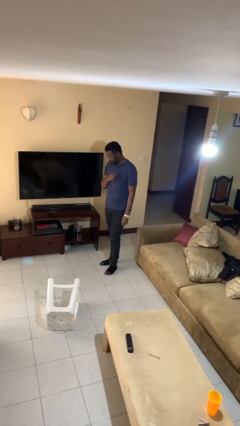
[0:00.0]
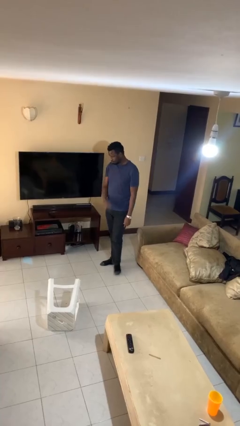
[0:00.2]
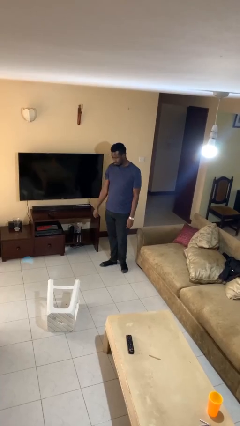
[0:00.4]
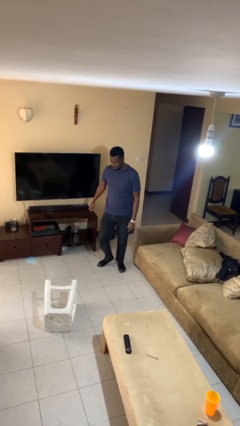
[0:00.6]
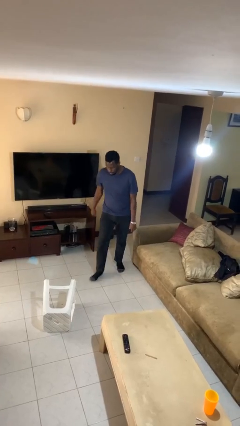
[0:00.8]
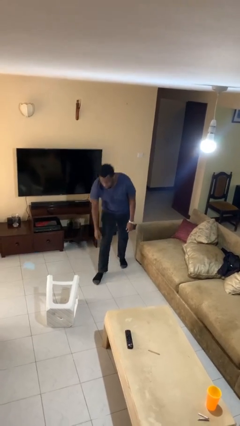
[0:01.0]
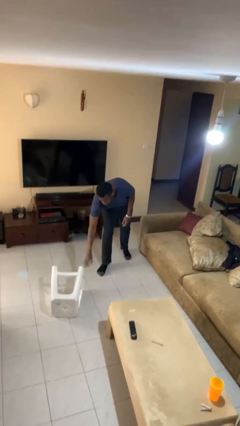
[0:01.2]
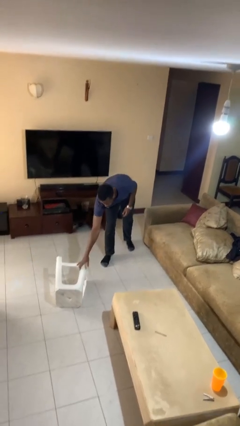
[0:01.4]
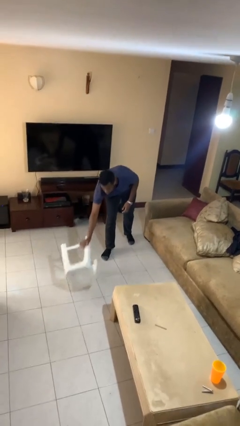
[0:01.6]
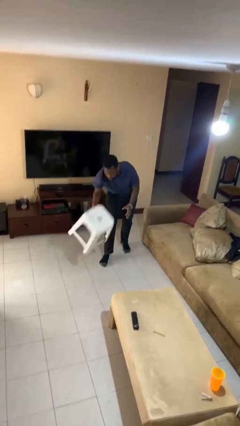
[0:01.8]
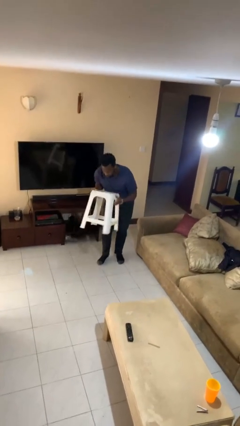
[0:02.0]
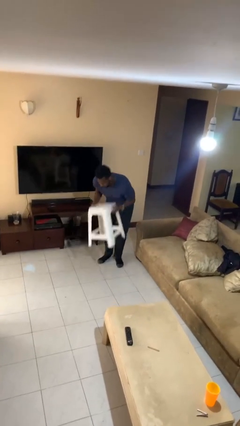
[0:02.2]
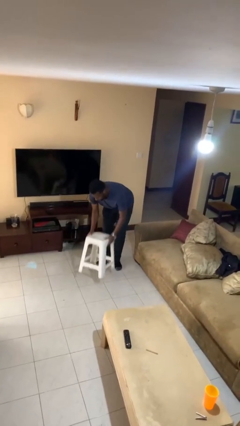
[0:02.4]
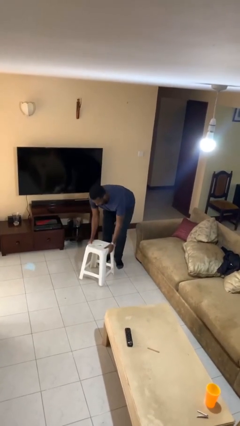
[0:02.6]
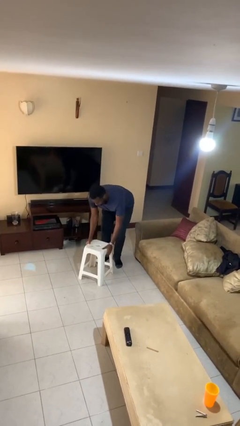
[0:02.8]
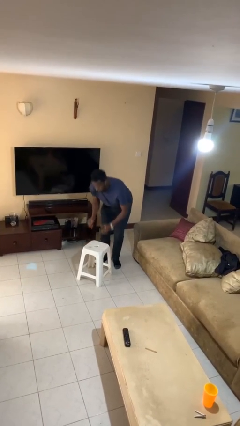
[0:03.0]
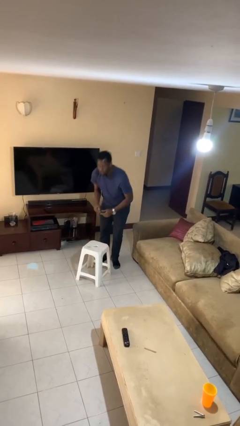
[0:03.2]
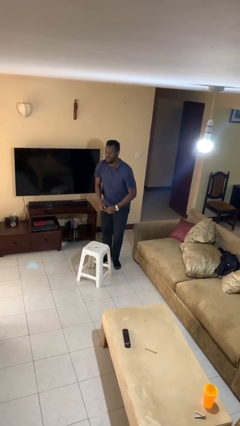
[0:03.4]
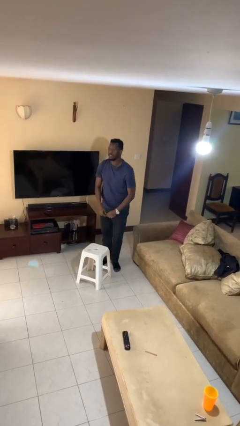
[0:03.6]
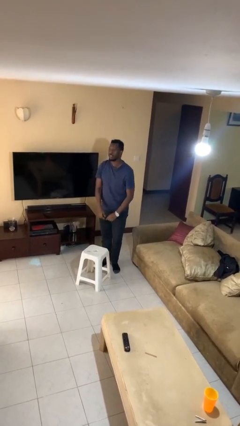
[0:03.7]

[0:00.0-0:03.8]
person sets upright furniture

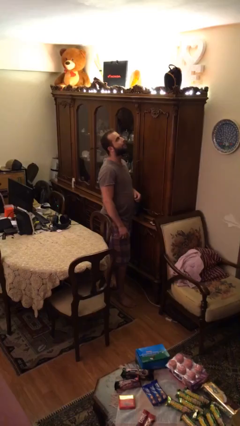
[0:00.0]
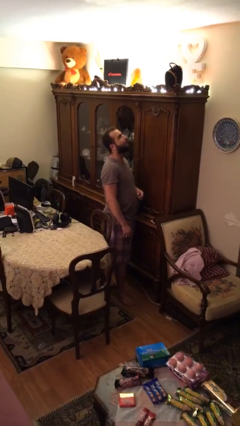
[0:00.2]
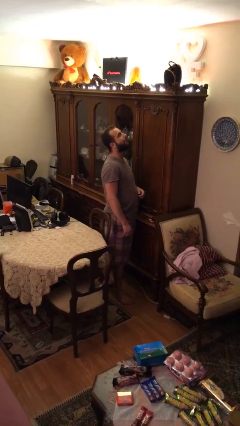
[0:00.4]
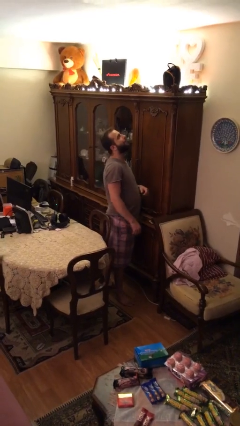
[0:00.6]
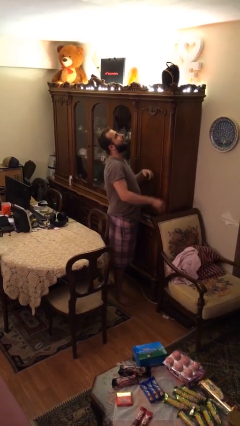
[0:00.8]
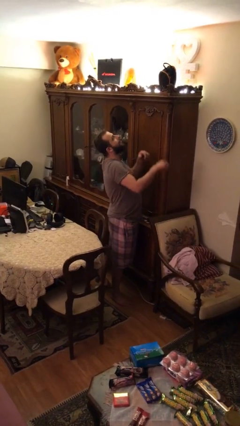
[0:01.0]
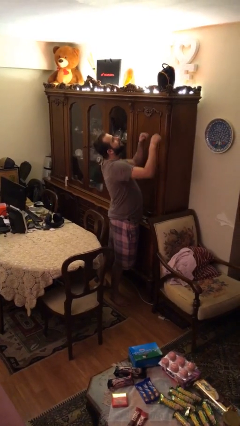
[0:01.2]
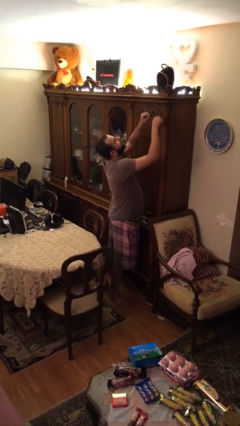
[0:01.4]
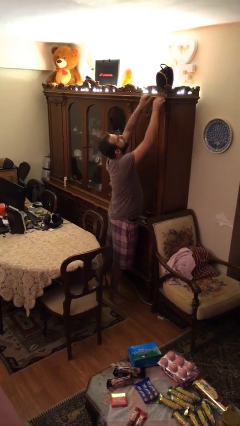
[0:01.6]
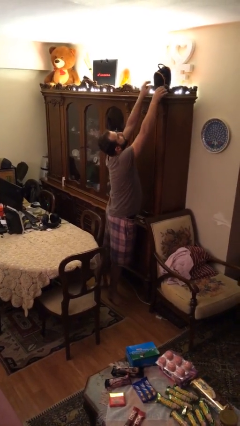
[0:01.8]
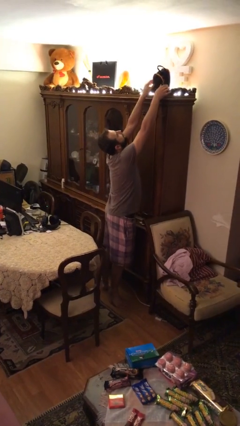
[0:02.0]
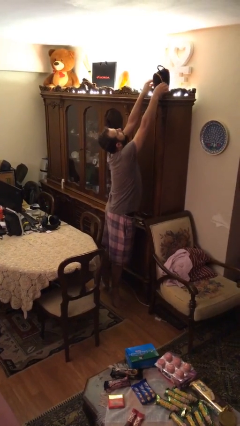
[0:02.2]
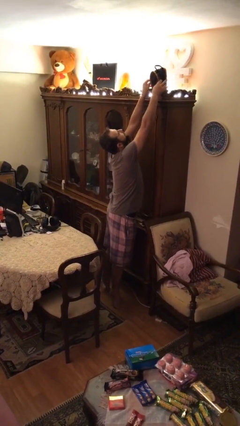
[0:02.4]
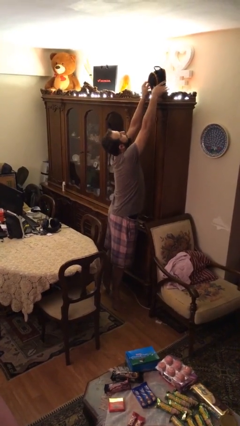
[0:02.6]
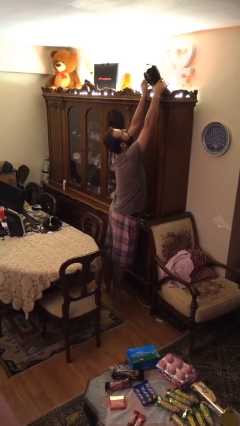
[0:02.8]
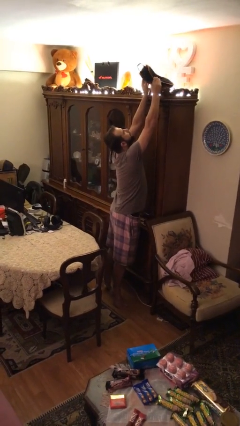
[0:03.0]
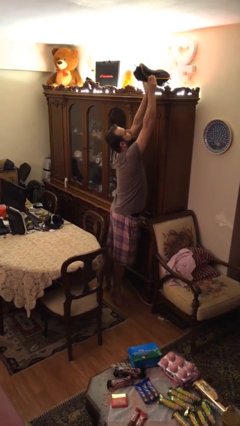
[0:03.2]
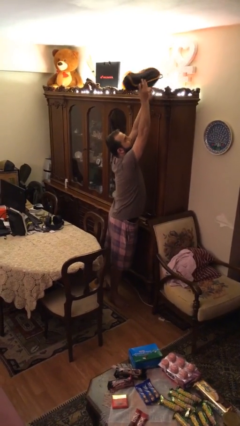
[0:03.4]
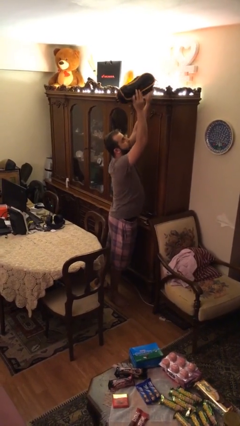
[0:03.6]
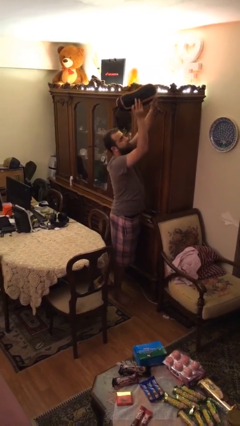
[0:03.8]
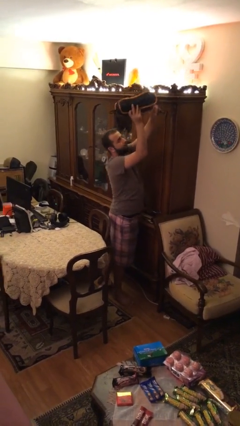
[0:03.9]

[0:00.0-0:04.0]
person picks up object from shelf

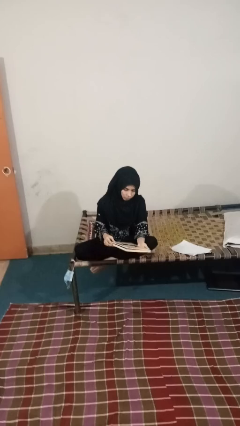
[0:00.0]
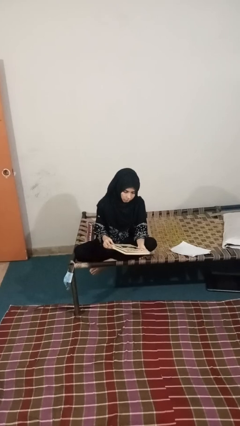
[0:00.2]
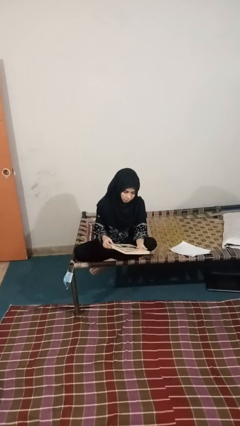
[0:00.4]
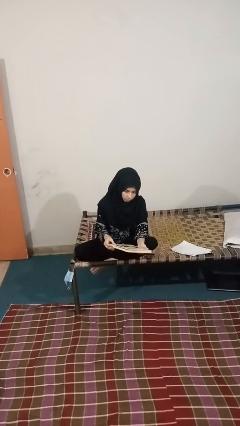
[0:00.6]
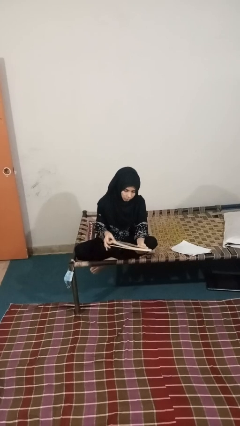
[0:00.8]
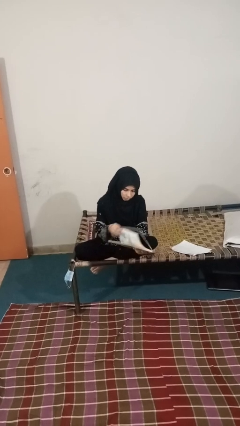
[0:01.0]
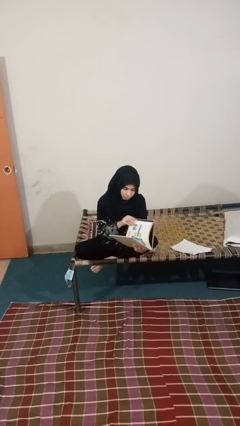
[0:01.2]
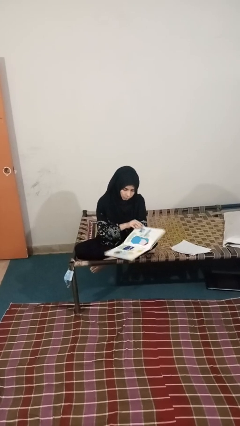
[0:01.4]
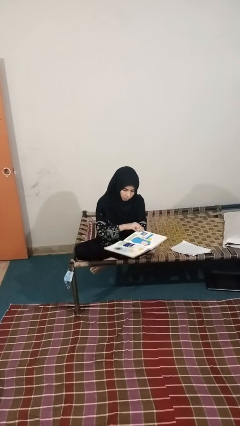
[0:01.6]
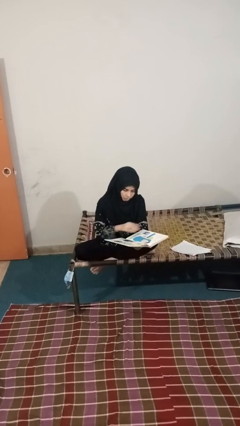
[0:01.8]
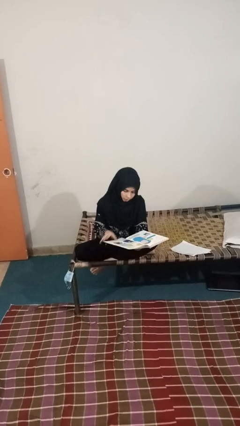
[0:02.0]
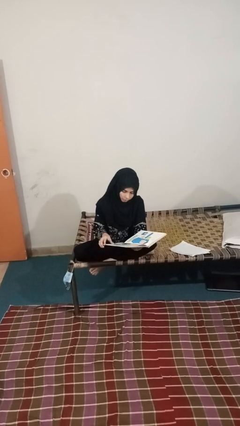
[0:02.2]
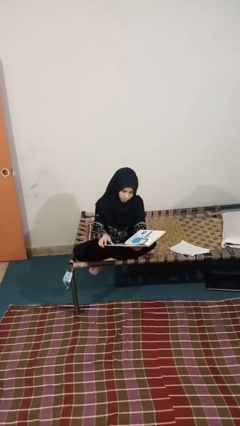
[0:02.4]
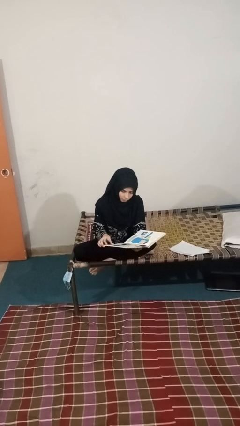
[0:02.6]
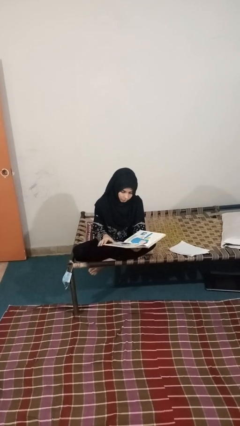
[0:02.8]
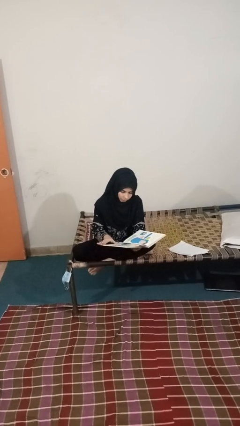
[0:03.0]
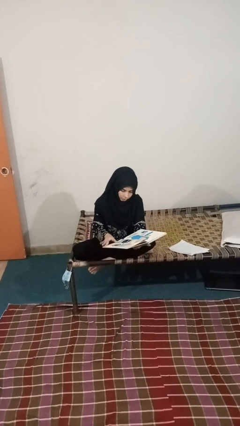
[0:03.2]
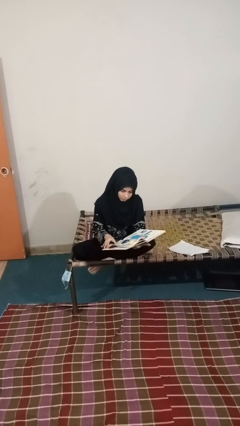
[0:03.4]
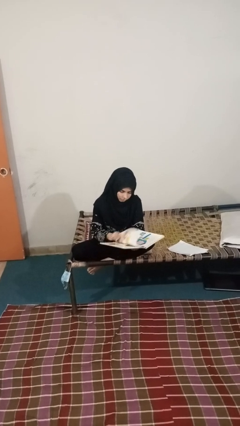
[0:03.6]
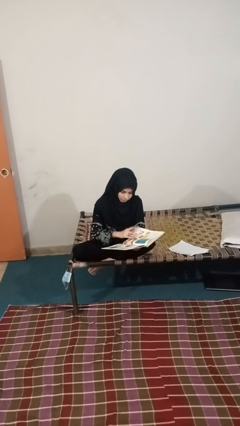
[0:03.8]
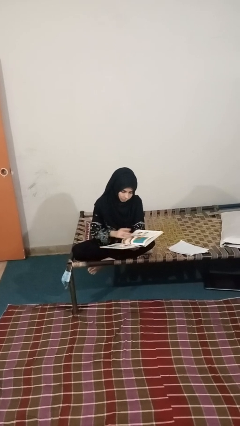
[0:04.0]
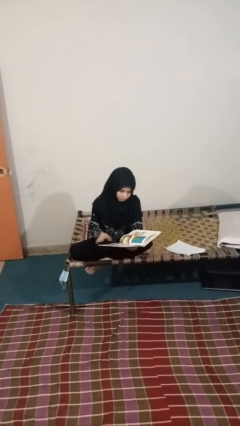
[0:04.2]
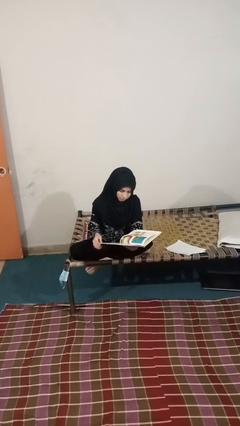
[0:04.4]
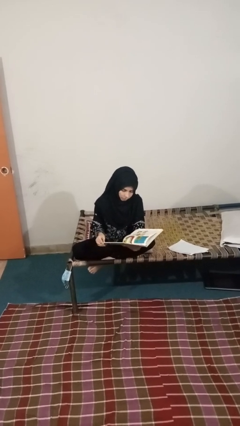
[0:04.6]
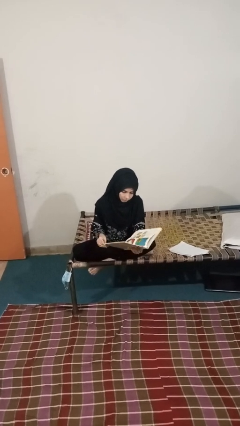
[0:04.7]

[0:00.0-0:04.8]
person reads magazine

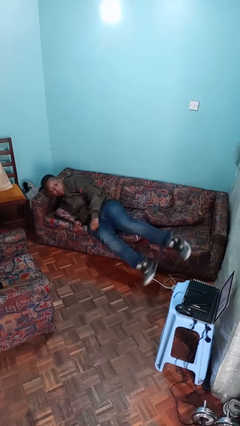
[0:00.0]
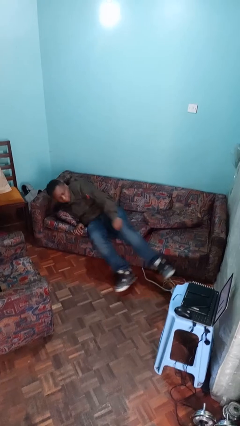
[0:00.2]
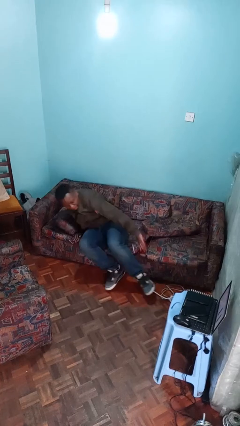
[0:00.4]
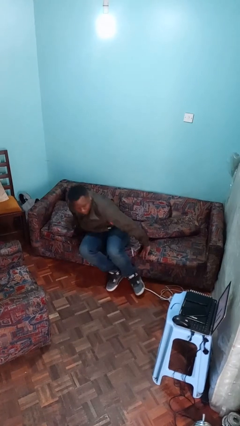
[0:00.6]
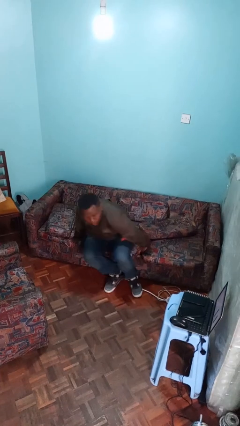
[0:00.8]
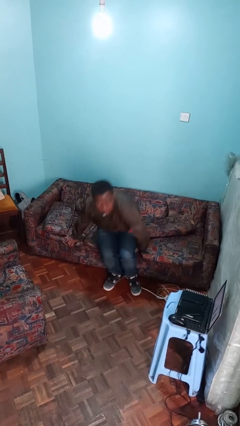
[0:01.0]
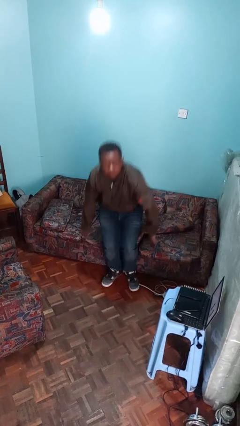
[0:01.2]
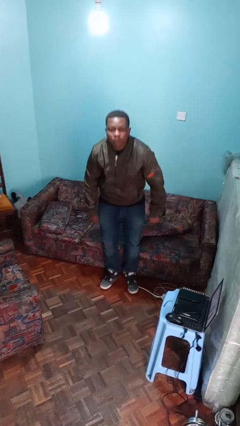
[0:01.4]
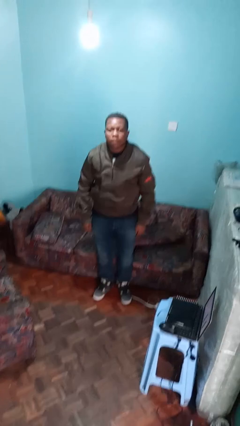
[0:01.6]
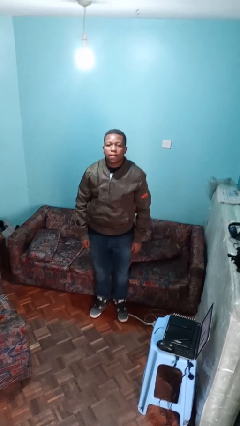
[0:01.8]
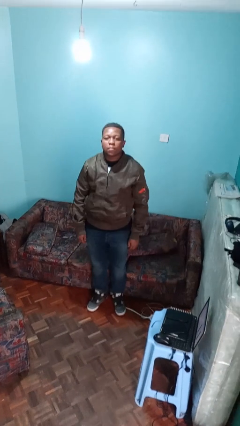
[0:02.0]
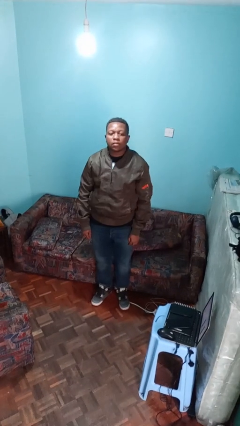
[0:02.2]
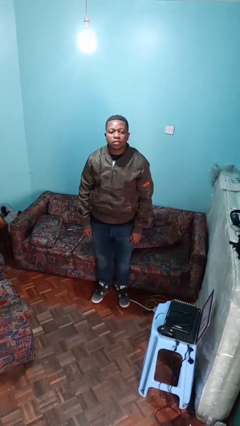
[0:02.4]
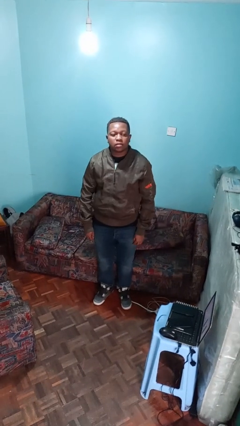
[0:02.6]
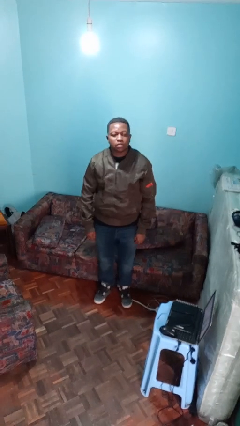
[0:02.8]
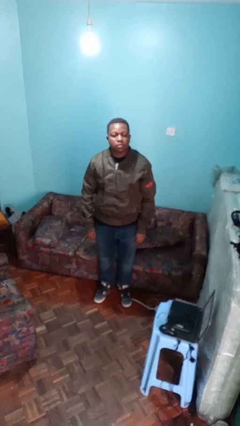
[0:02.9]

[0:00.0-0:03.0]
person stands up

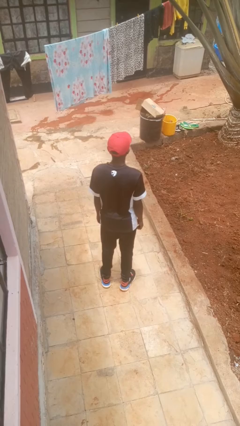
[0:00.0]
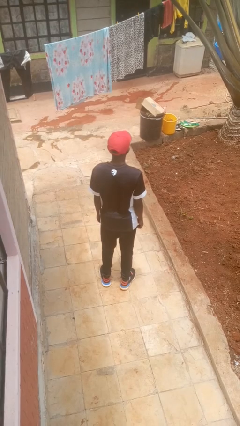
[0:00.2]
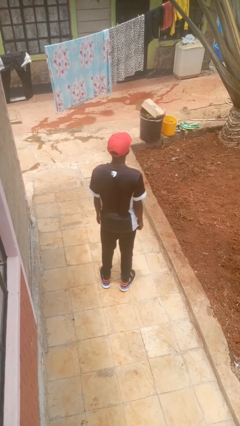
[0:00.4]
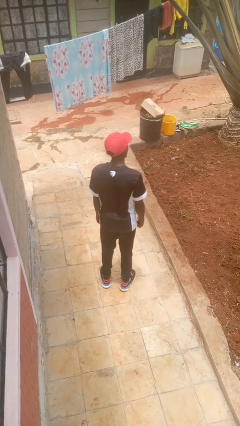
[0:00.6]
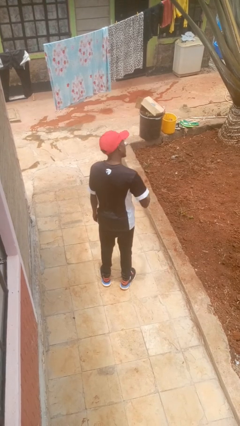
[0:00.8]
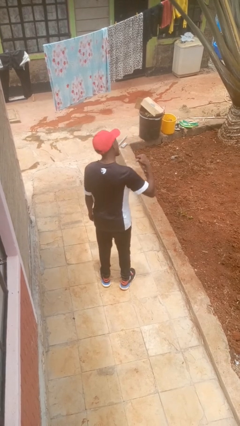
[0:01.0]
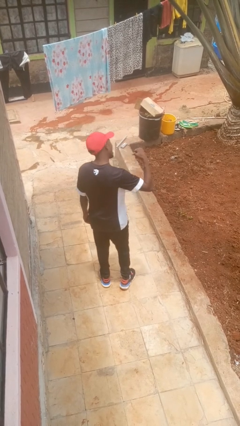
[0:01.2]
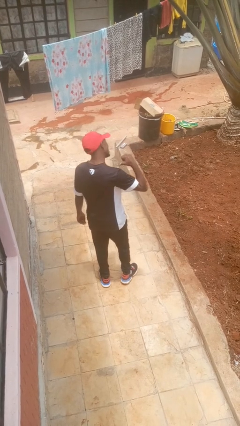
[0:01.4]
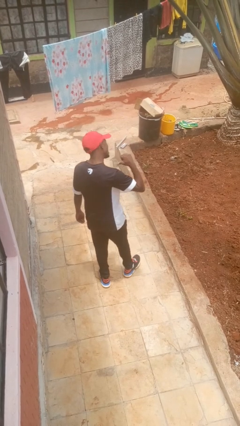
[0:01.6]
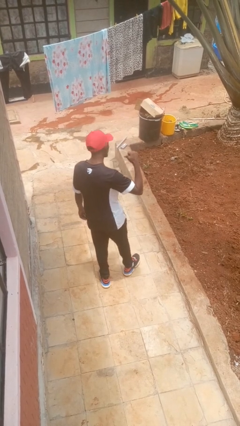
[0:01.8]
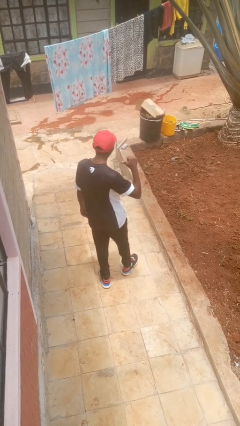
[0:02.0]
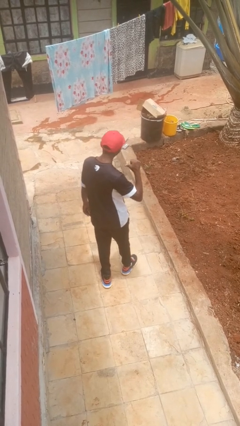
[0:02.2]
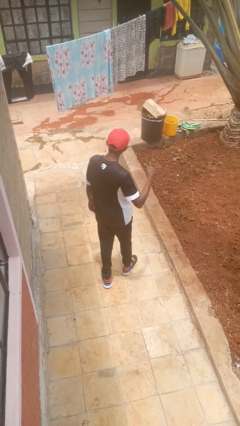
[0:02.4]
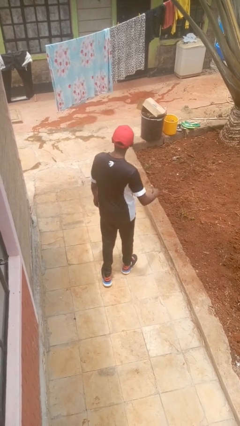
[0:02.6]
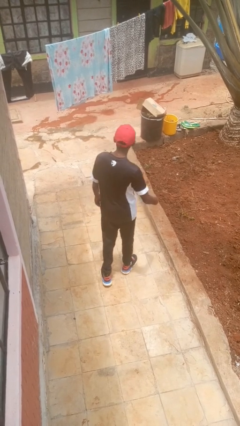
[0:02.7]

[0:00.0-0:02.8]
person gestures behind me
